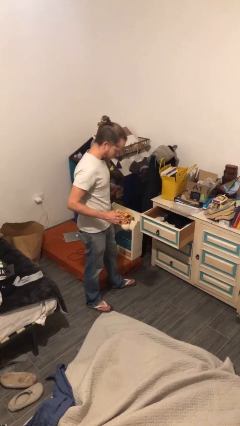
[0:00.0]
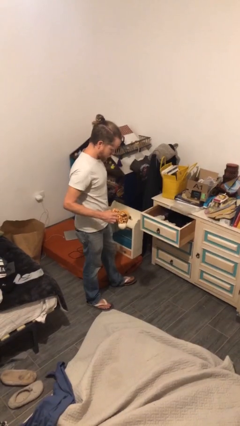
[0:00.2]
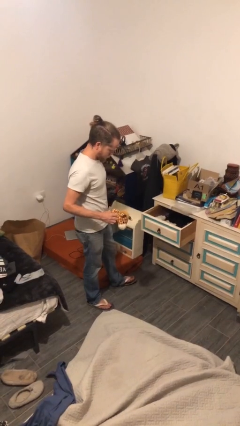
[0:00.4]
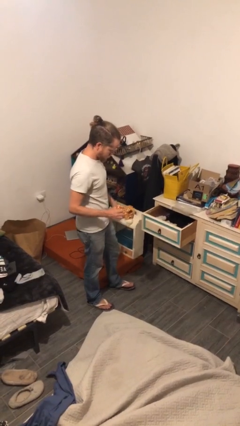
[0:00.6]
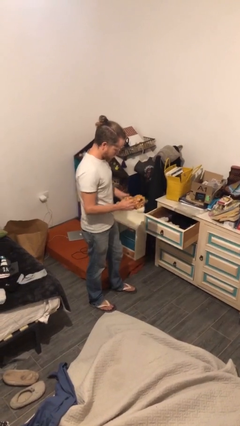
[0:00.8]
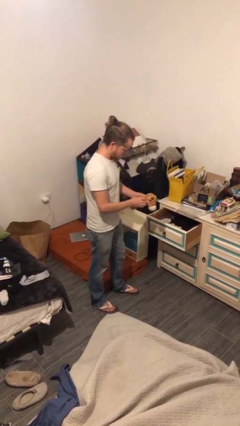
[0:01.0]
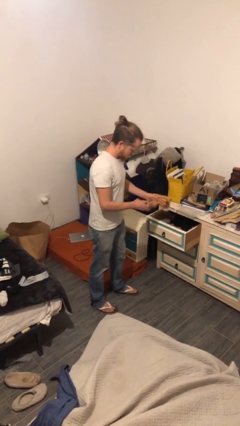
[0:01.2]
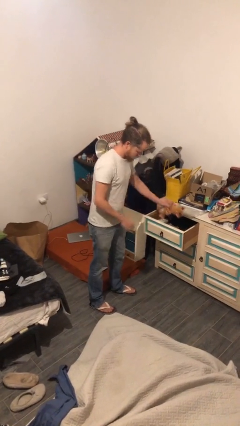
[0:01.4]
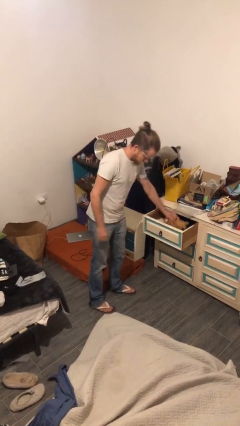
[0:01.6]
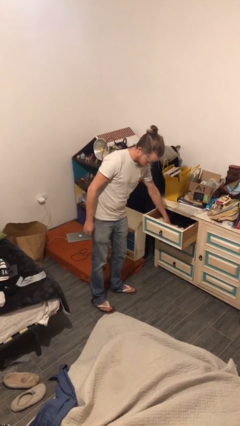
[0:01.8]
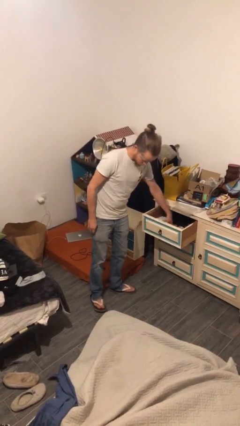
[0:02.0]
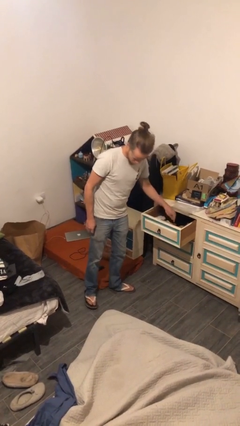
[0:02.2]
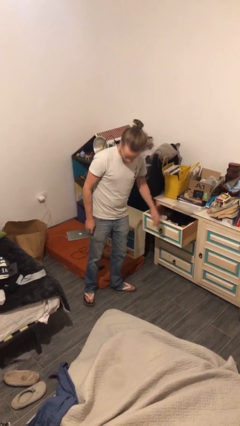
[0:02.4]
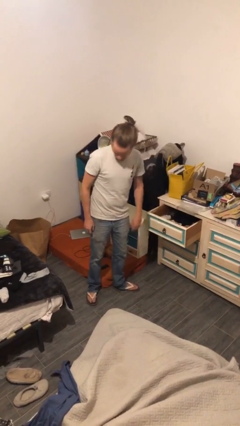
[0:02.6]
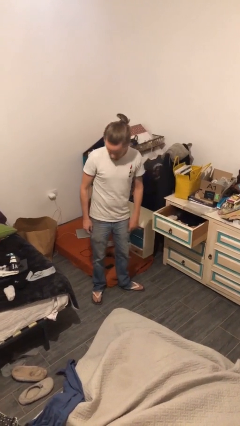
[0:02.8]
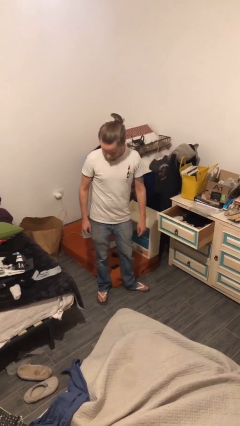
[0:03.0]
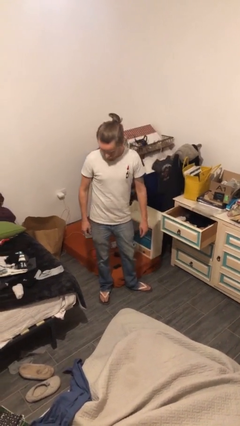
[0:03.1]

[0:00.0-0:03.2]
person puts down object into cabinet

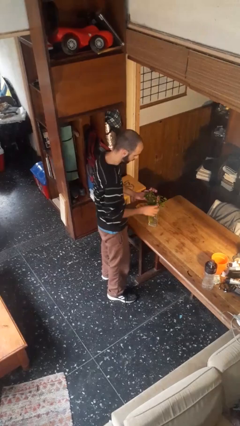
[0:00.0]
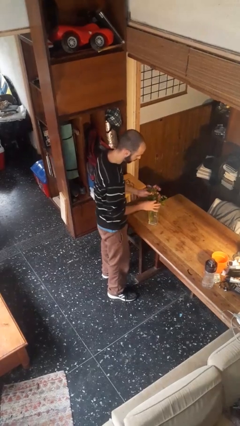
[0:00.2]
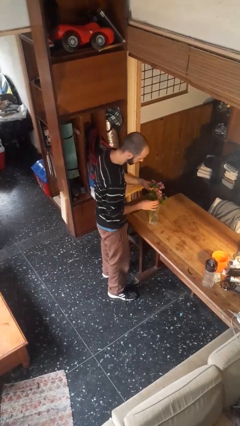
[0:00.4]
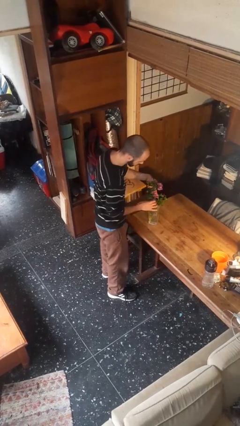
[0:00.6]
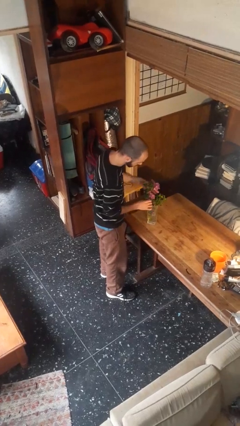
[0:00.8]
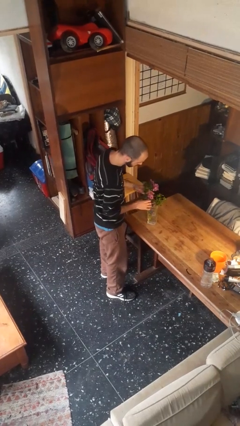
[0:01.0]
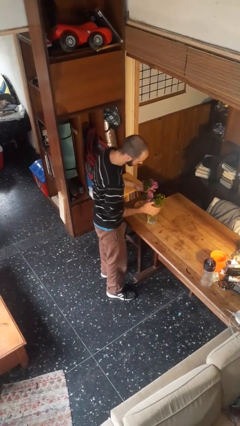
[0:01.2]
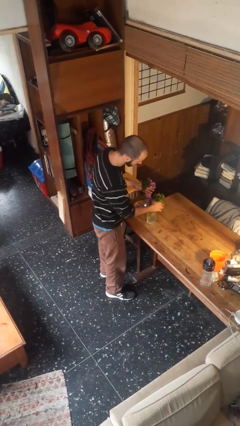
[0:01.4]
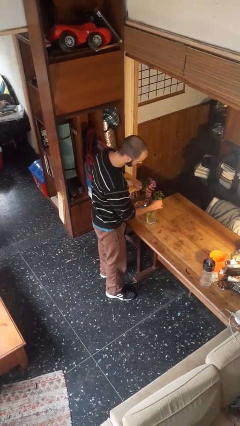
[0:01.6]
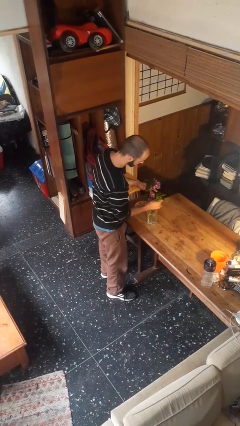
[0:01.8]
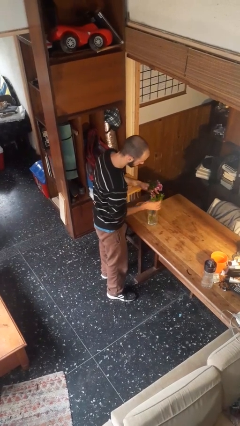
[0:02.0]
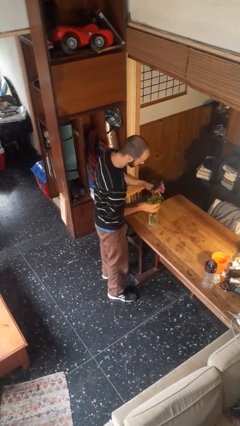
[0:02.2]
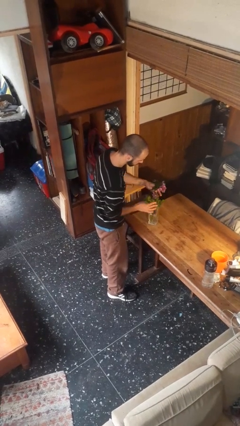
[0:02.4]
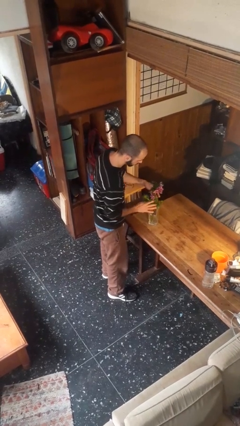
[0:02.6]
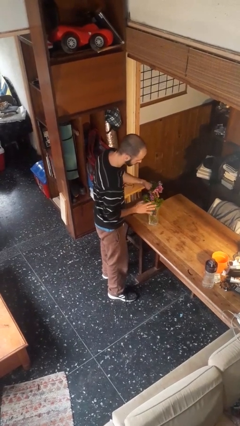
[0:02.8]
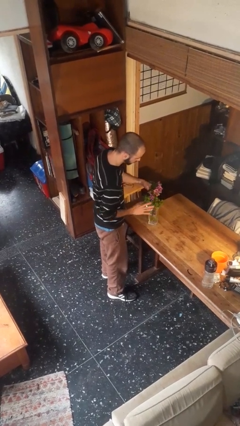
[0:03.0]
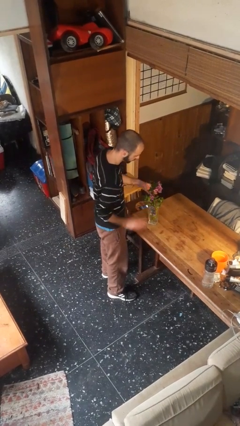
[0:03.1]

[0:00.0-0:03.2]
person arranges flowers in vase

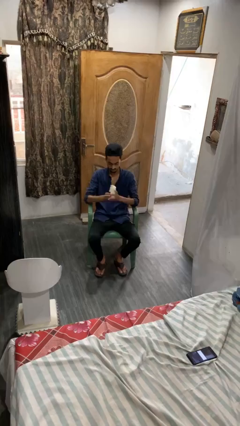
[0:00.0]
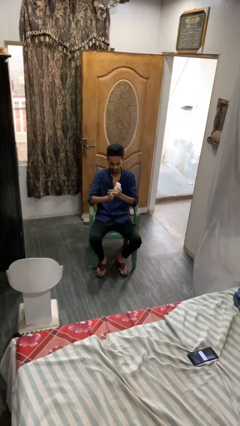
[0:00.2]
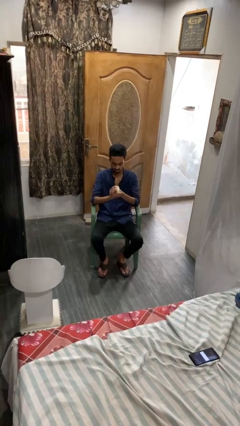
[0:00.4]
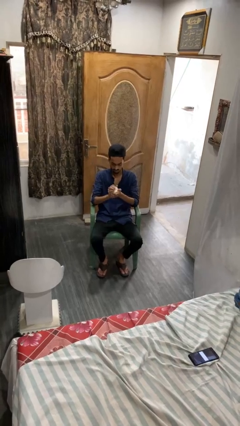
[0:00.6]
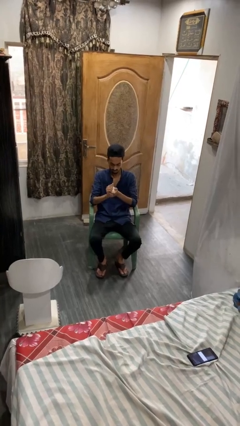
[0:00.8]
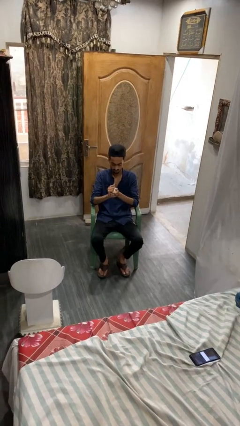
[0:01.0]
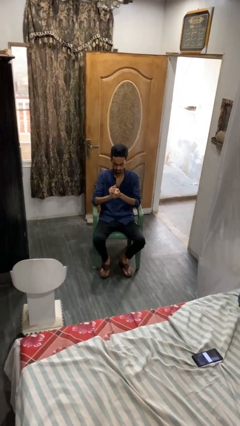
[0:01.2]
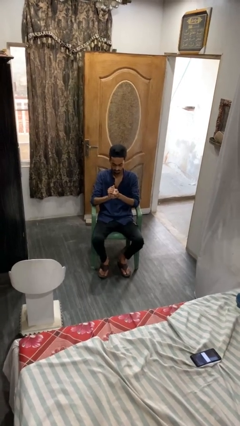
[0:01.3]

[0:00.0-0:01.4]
person crumples paper

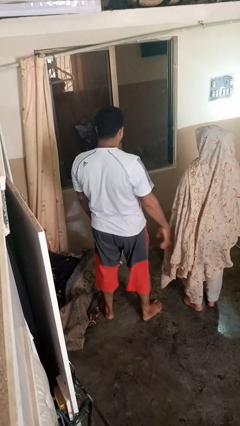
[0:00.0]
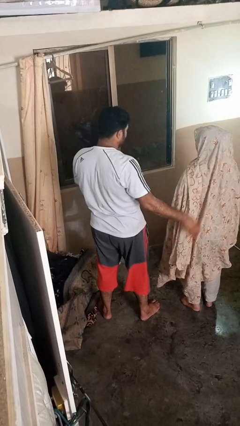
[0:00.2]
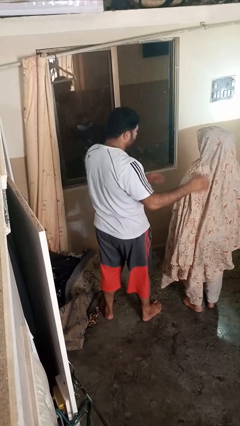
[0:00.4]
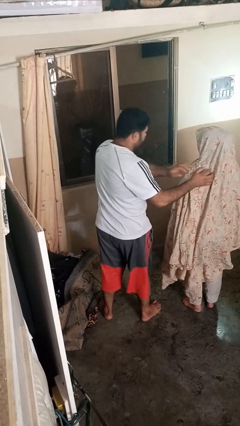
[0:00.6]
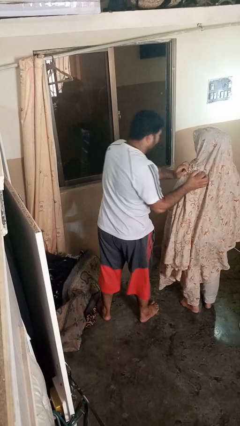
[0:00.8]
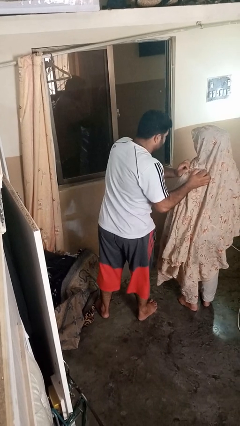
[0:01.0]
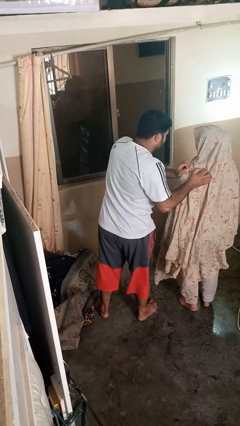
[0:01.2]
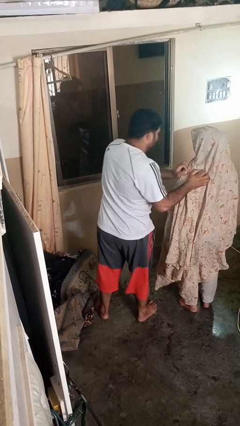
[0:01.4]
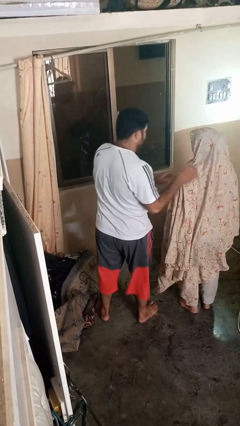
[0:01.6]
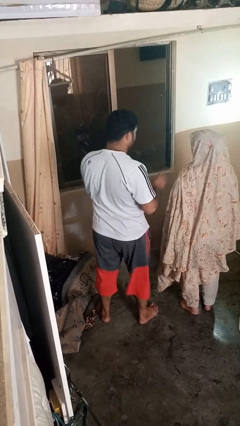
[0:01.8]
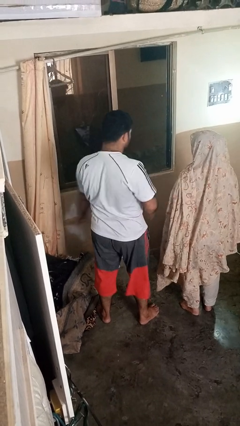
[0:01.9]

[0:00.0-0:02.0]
person shoves person

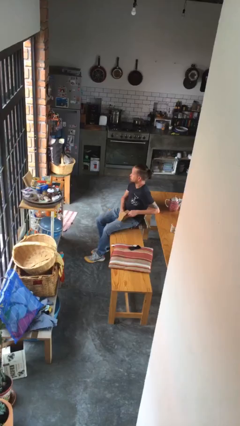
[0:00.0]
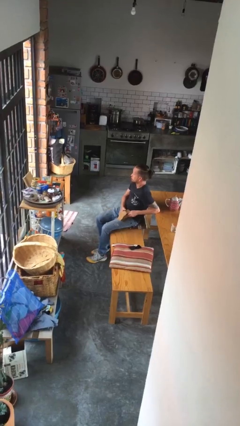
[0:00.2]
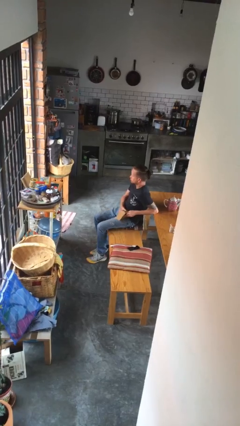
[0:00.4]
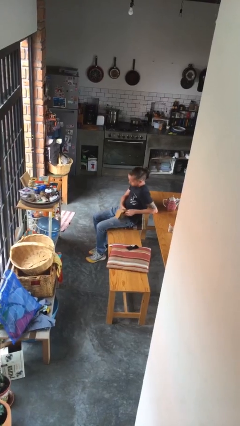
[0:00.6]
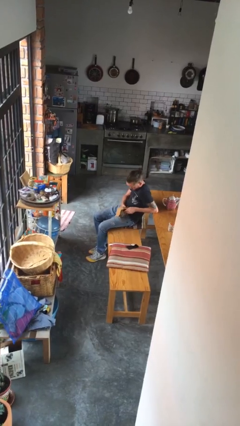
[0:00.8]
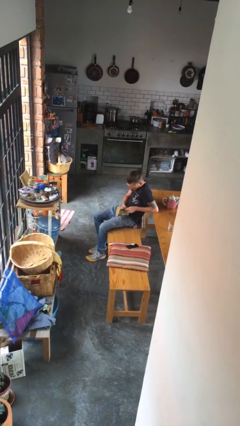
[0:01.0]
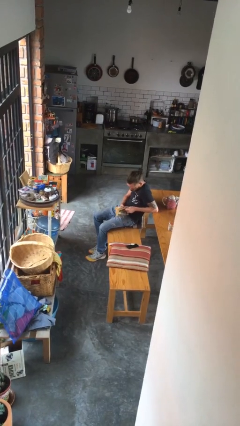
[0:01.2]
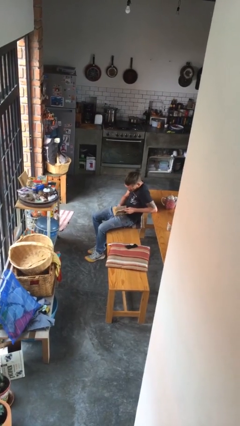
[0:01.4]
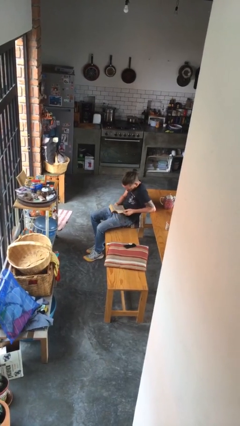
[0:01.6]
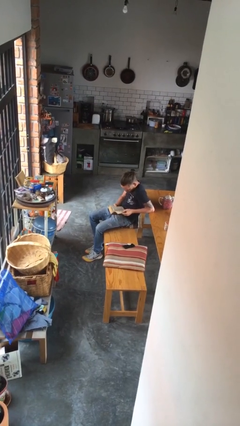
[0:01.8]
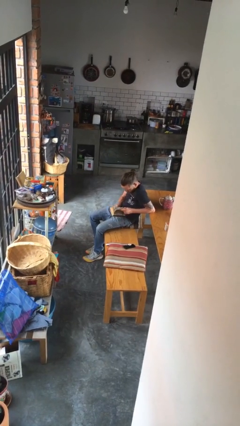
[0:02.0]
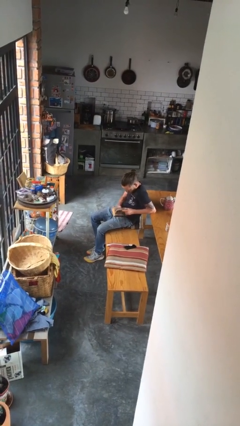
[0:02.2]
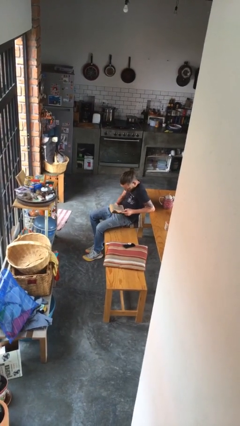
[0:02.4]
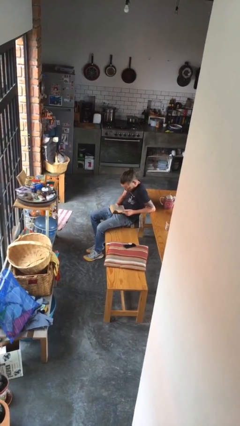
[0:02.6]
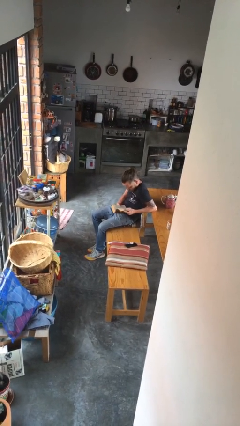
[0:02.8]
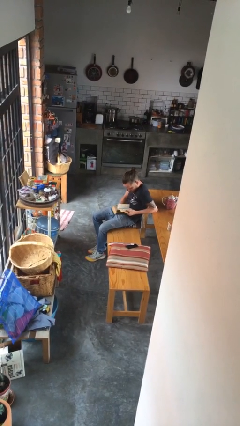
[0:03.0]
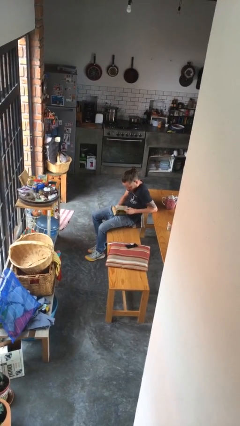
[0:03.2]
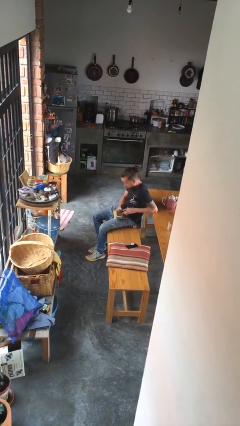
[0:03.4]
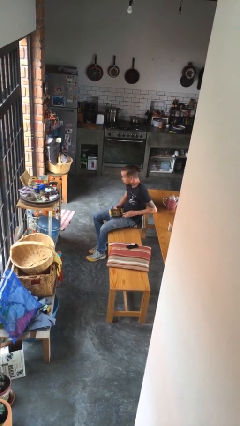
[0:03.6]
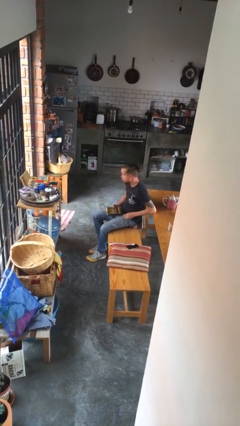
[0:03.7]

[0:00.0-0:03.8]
person reads book

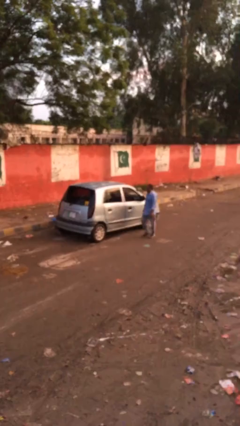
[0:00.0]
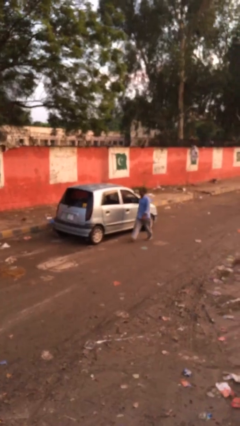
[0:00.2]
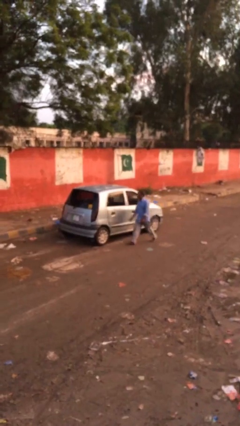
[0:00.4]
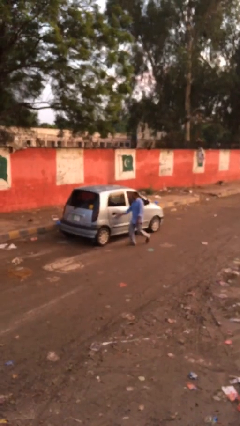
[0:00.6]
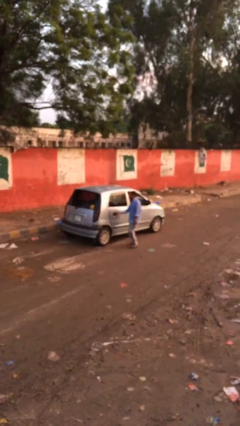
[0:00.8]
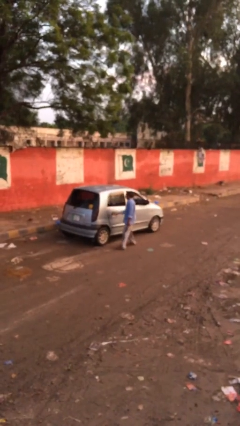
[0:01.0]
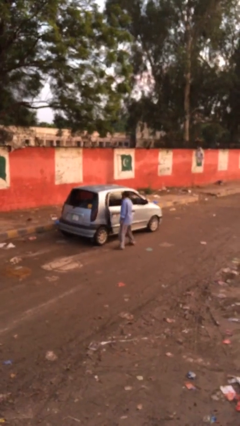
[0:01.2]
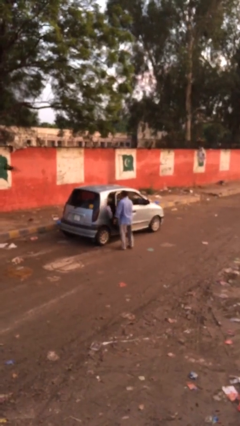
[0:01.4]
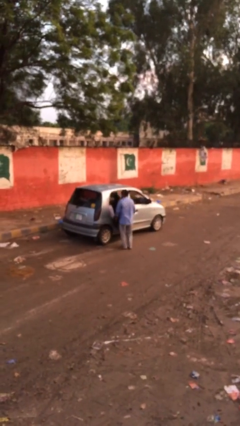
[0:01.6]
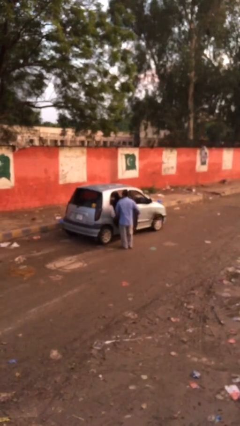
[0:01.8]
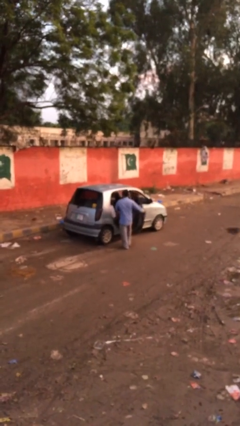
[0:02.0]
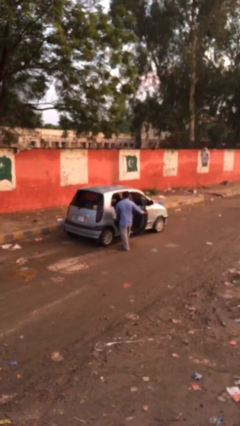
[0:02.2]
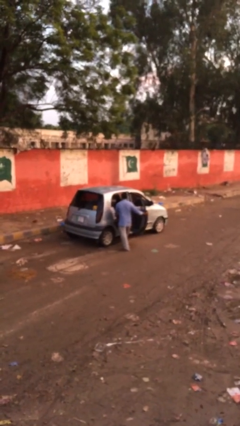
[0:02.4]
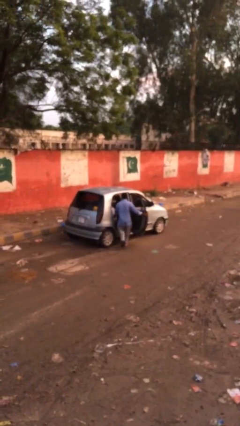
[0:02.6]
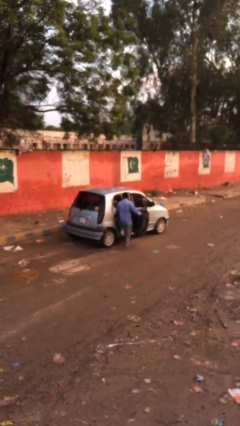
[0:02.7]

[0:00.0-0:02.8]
car picks up person

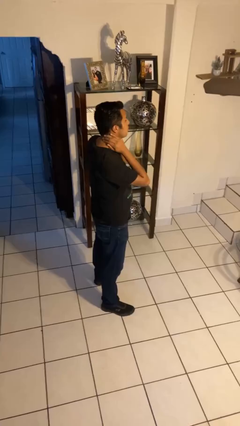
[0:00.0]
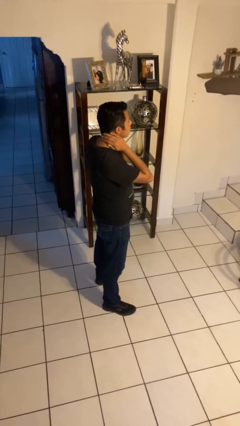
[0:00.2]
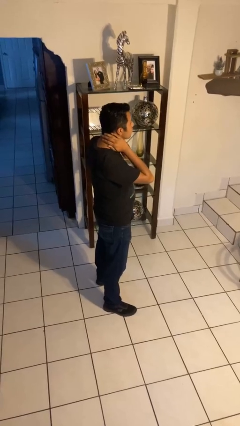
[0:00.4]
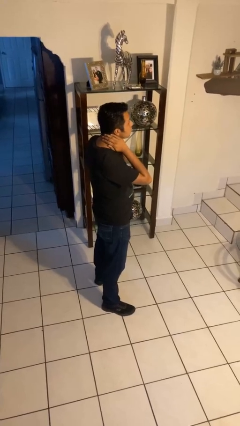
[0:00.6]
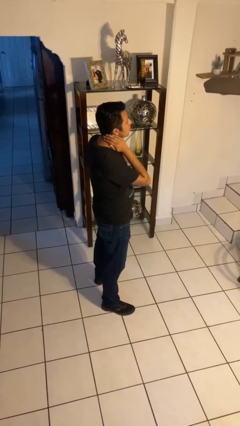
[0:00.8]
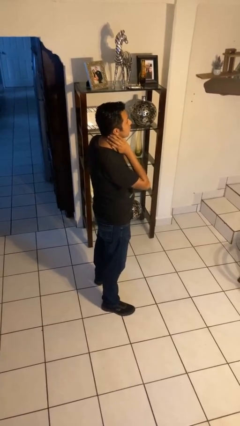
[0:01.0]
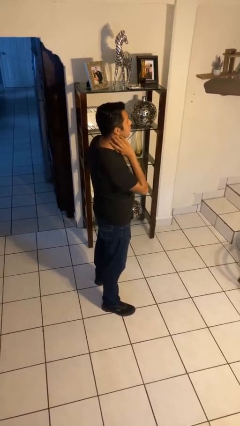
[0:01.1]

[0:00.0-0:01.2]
person rubs neck
